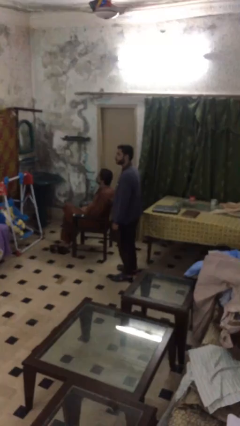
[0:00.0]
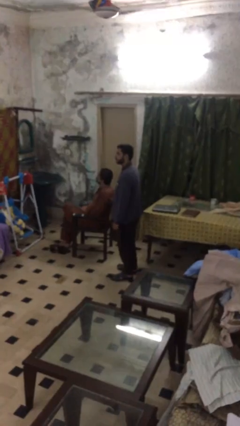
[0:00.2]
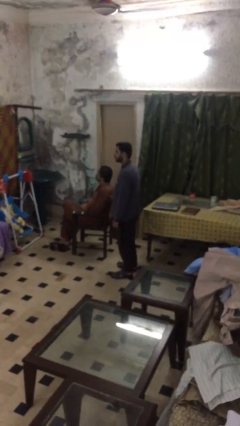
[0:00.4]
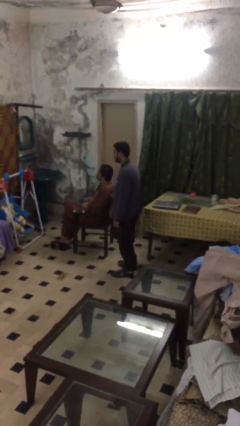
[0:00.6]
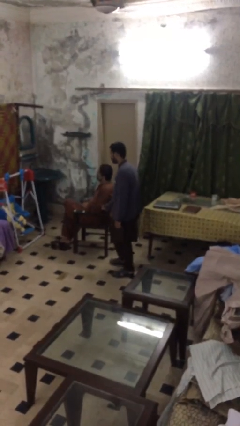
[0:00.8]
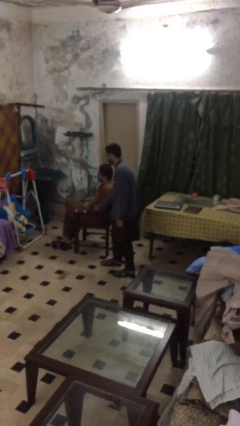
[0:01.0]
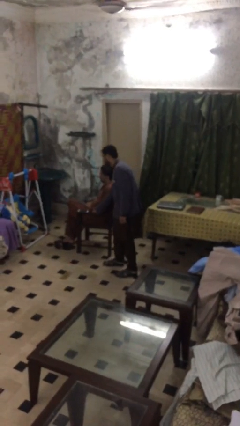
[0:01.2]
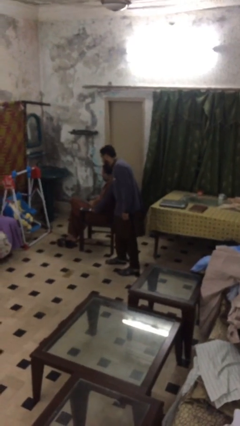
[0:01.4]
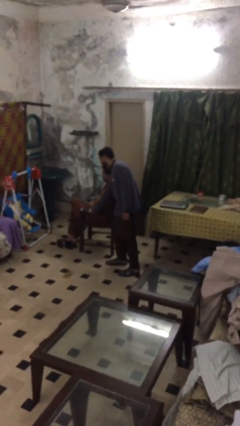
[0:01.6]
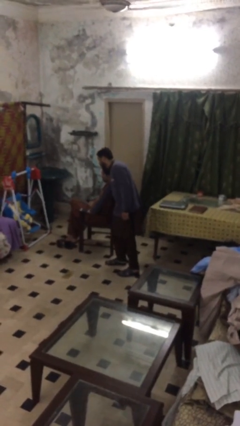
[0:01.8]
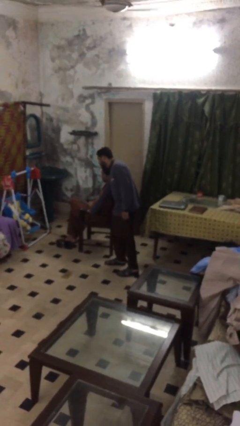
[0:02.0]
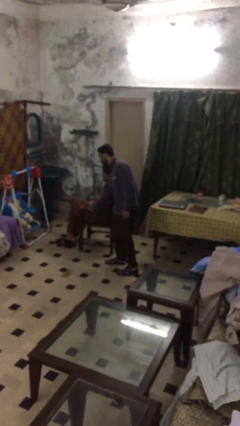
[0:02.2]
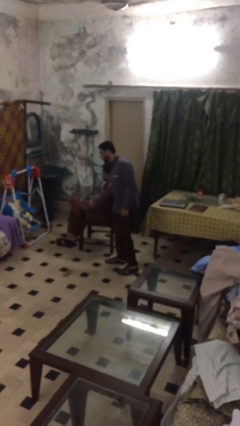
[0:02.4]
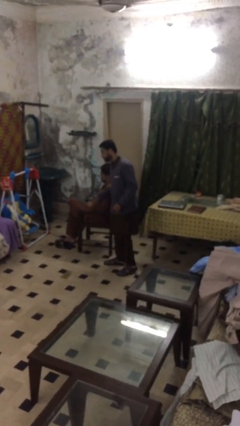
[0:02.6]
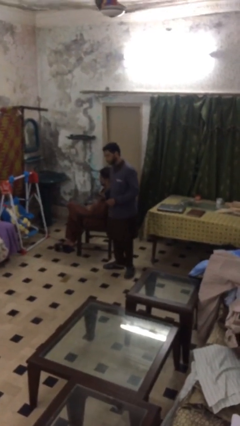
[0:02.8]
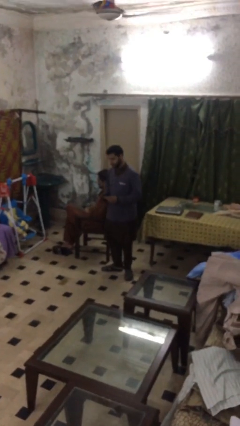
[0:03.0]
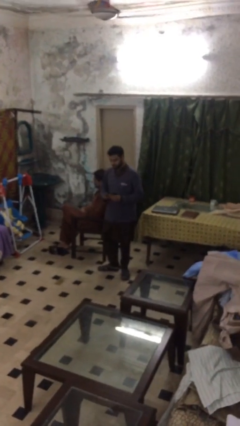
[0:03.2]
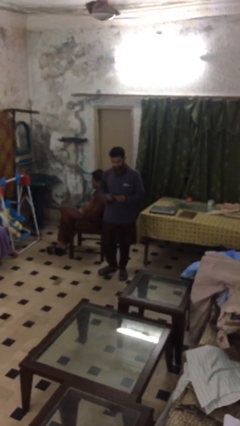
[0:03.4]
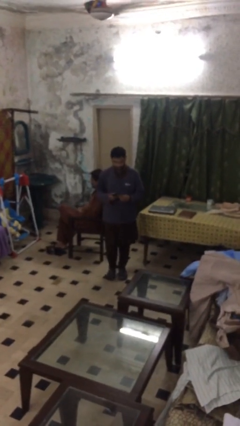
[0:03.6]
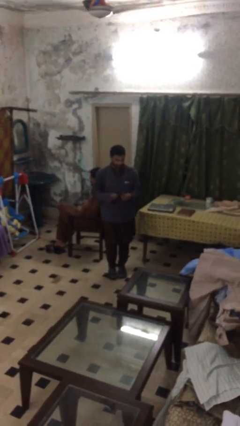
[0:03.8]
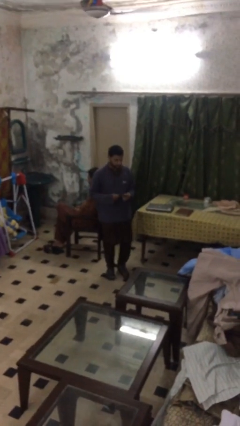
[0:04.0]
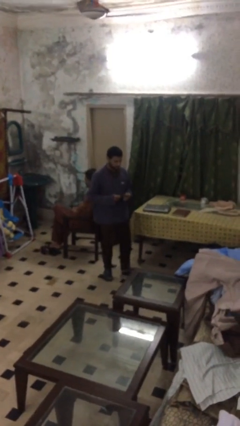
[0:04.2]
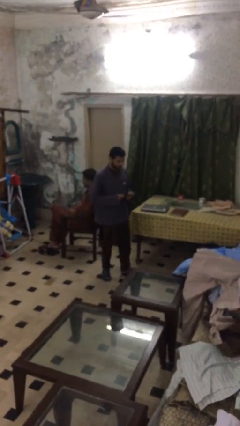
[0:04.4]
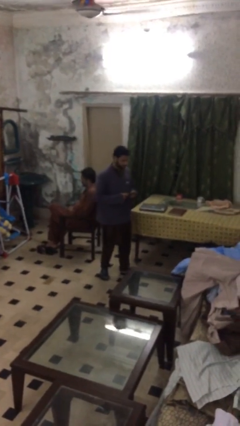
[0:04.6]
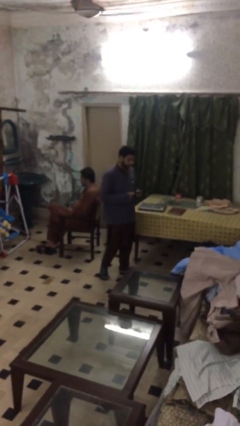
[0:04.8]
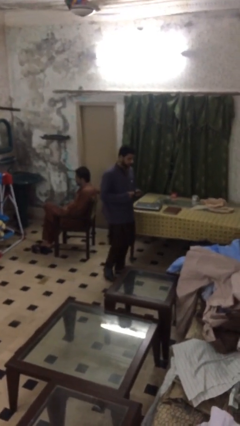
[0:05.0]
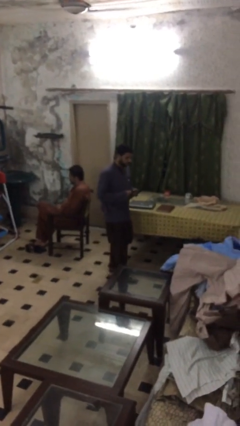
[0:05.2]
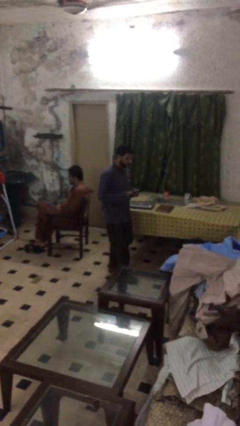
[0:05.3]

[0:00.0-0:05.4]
person steals object from person

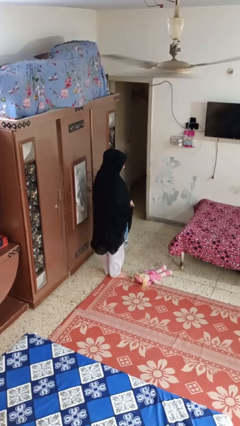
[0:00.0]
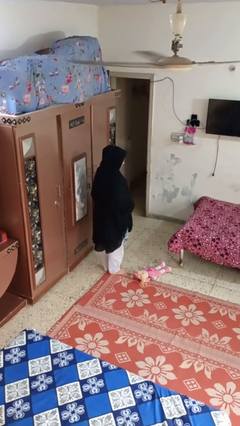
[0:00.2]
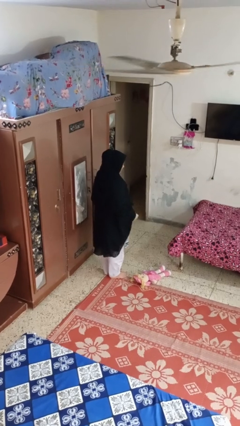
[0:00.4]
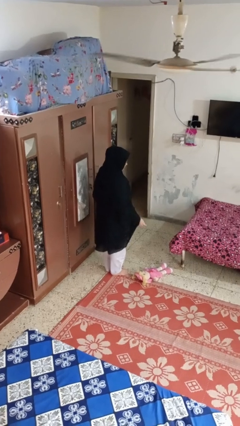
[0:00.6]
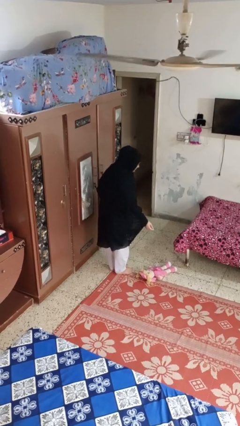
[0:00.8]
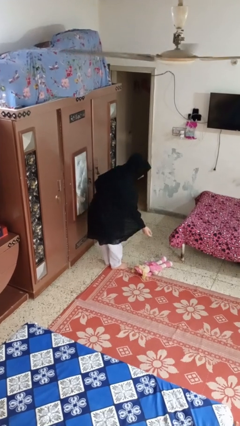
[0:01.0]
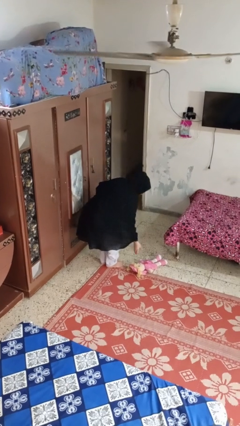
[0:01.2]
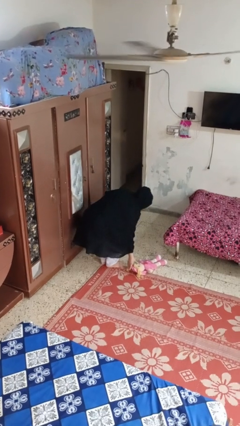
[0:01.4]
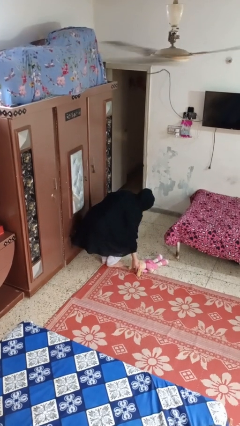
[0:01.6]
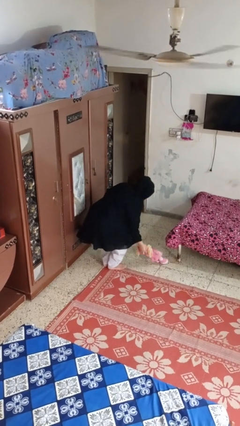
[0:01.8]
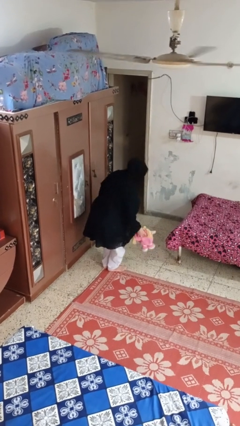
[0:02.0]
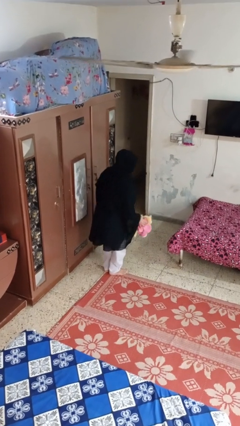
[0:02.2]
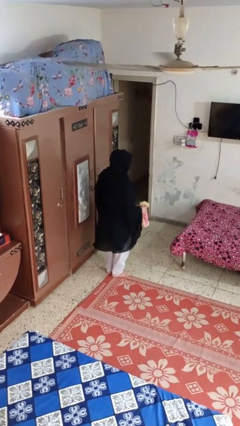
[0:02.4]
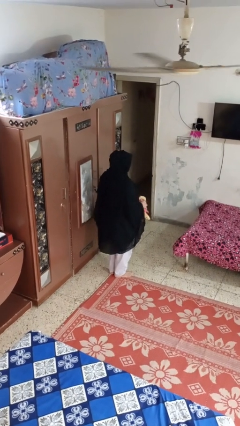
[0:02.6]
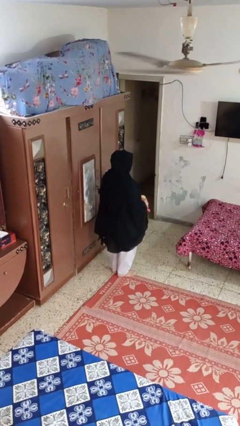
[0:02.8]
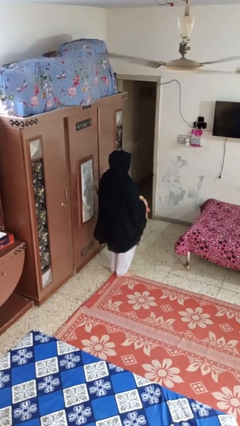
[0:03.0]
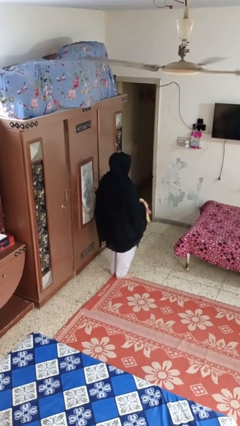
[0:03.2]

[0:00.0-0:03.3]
person picks up object from floor

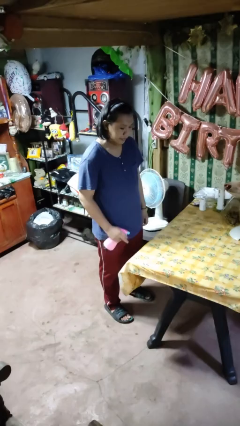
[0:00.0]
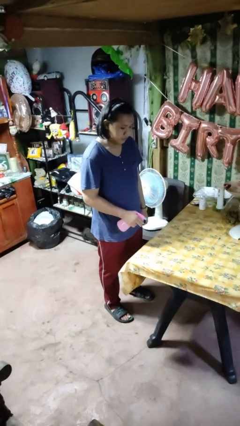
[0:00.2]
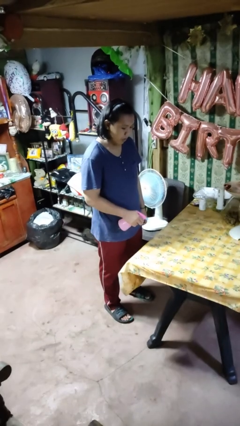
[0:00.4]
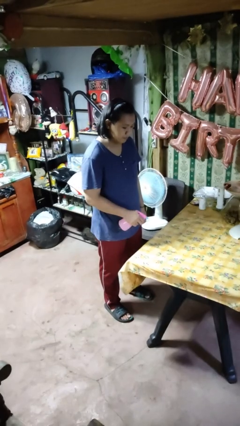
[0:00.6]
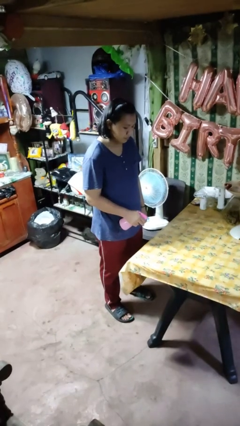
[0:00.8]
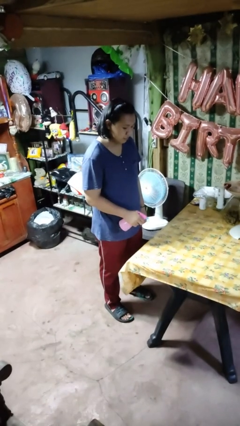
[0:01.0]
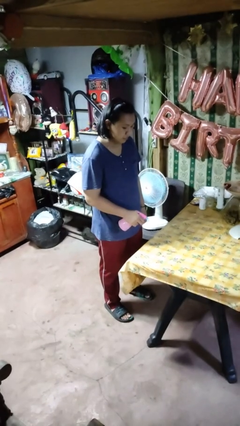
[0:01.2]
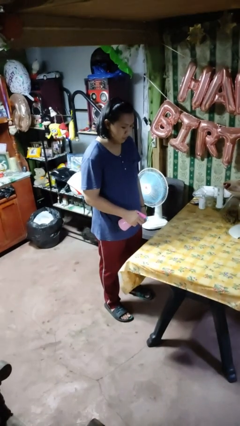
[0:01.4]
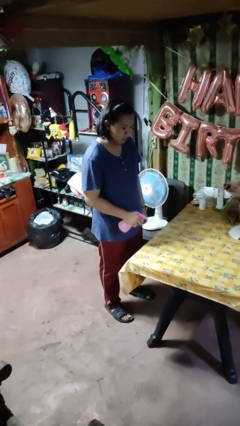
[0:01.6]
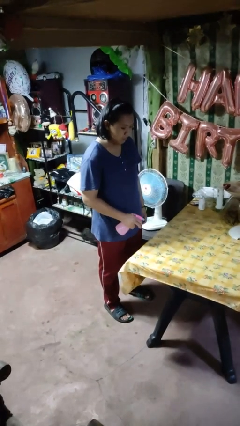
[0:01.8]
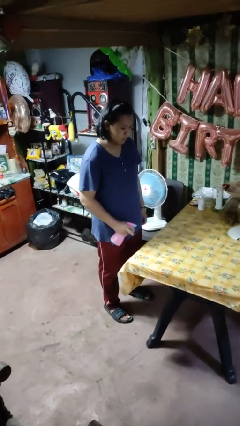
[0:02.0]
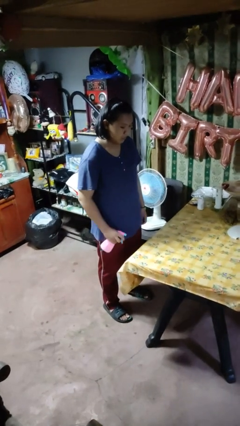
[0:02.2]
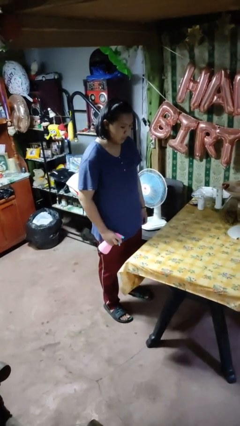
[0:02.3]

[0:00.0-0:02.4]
person sprays from bottle

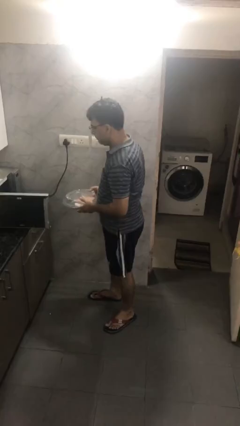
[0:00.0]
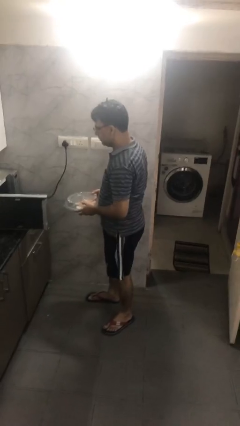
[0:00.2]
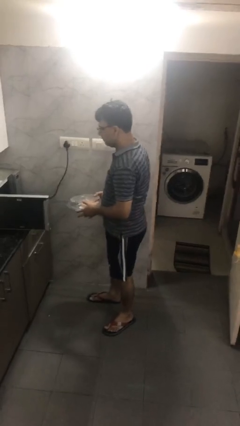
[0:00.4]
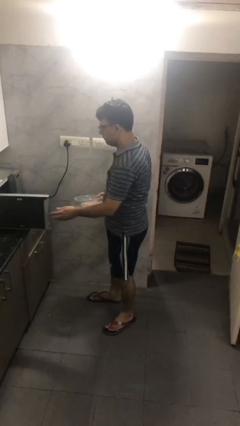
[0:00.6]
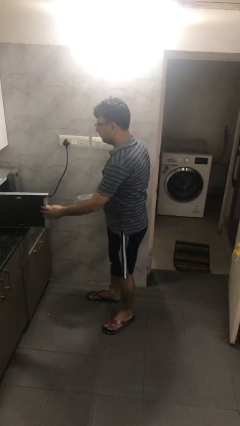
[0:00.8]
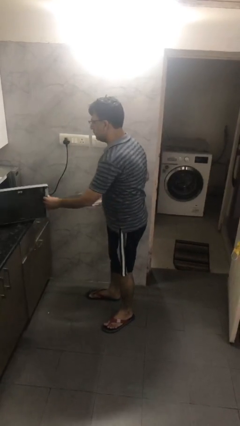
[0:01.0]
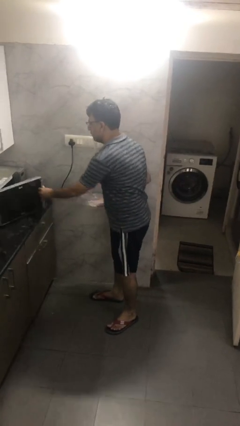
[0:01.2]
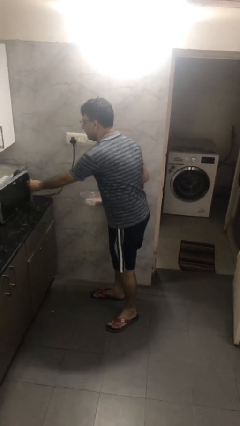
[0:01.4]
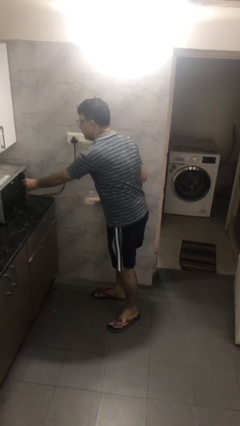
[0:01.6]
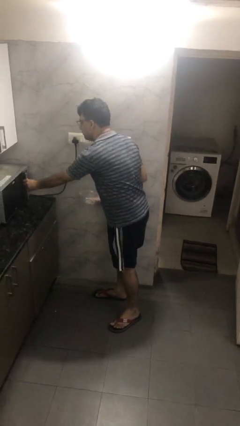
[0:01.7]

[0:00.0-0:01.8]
person closes microwave

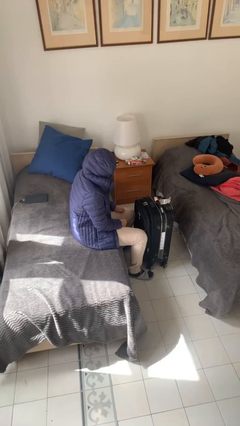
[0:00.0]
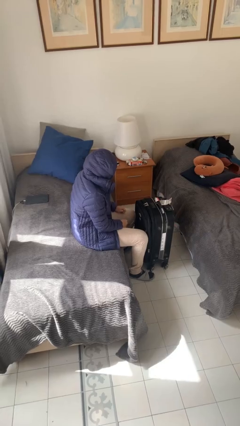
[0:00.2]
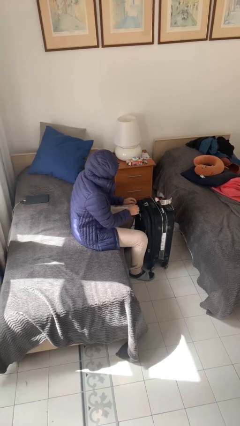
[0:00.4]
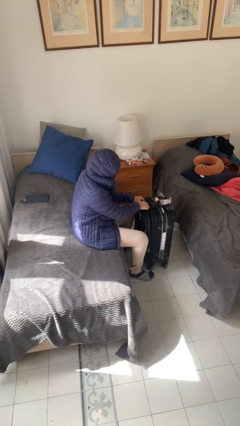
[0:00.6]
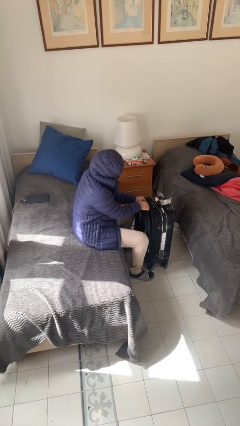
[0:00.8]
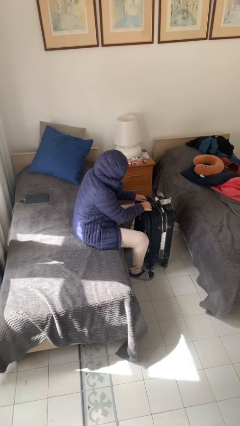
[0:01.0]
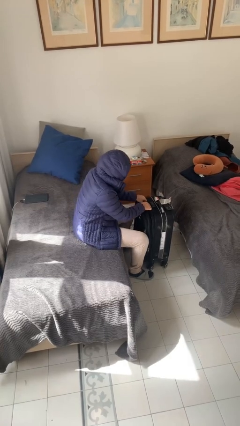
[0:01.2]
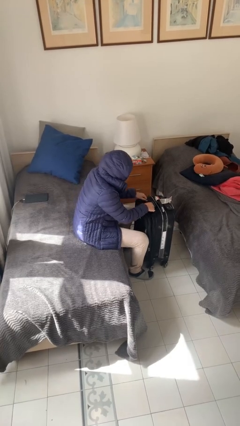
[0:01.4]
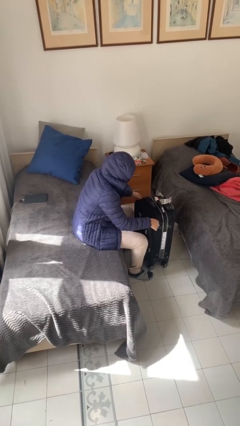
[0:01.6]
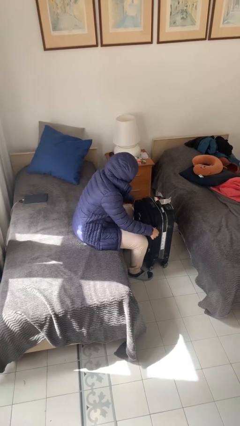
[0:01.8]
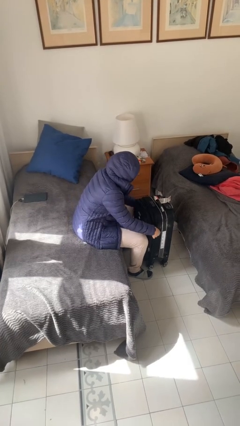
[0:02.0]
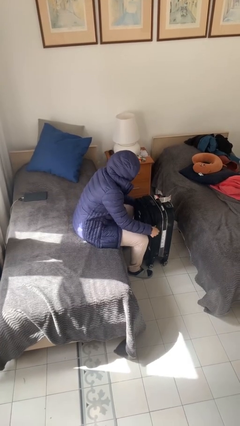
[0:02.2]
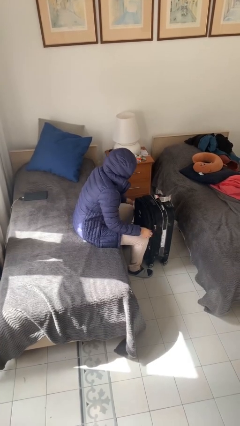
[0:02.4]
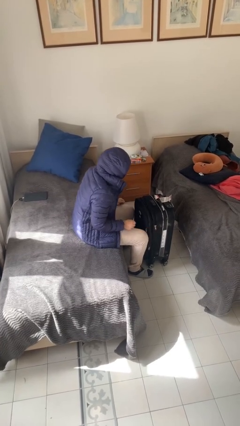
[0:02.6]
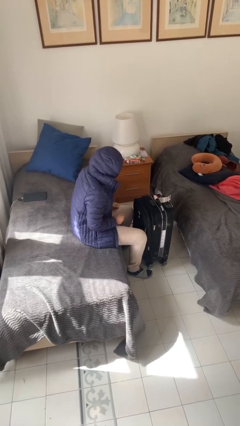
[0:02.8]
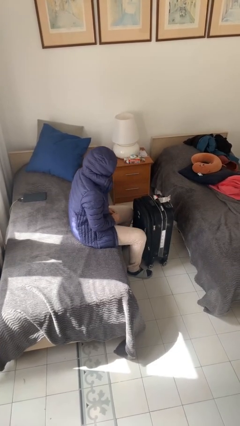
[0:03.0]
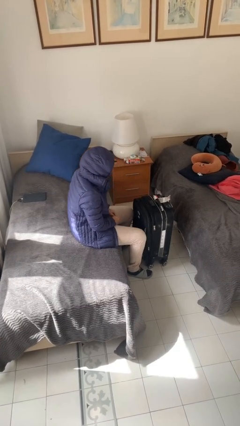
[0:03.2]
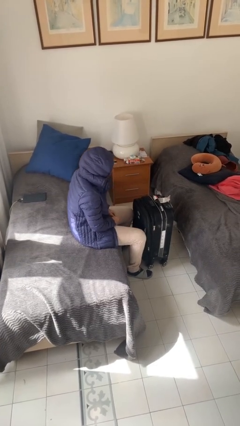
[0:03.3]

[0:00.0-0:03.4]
person opens suitcase

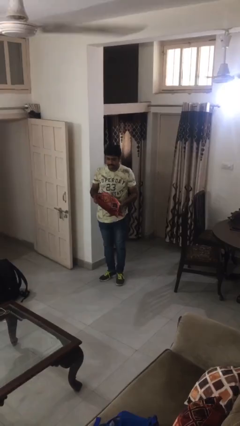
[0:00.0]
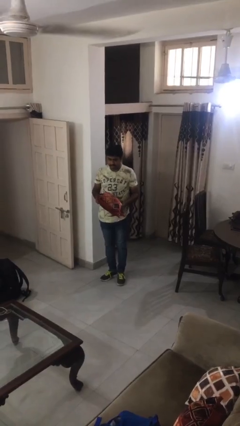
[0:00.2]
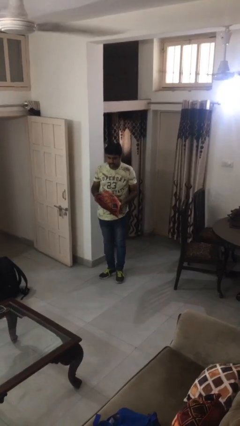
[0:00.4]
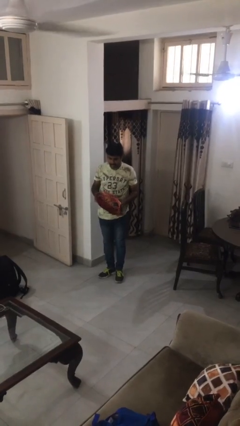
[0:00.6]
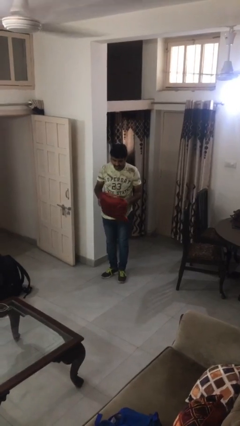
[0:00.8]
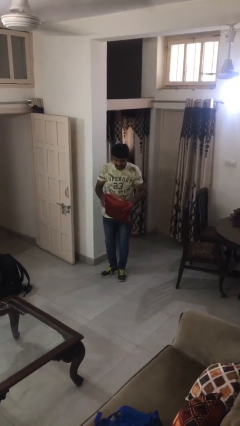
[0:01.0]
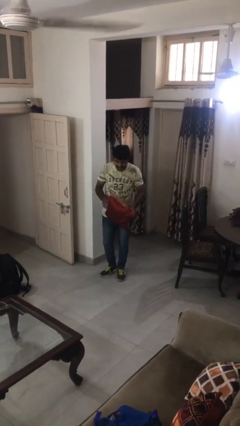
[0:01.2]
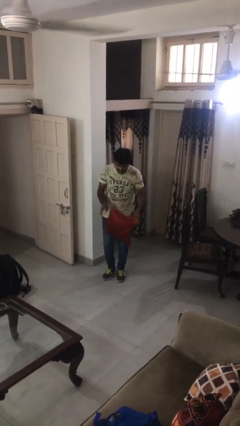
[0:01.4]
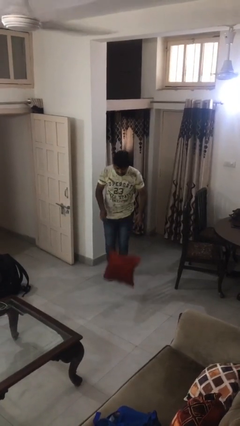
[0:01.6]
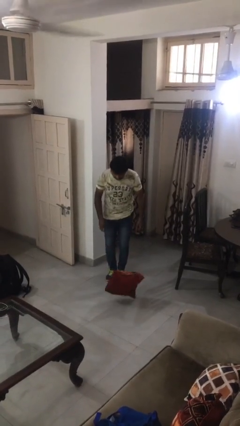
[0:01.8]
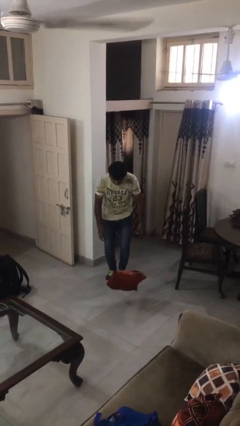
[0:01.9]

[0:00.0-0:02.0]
person drops object
